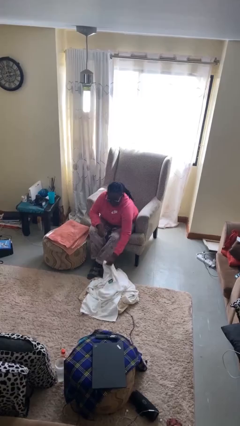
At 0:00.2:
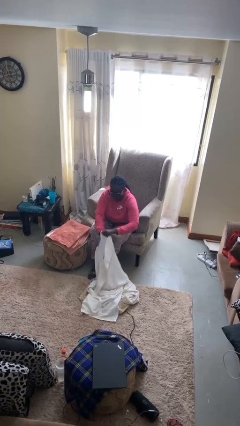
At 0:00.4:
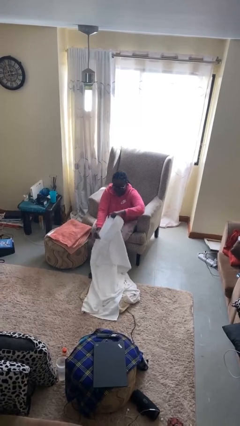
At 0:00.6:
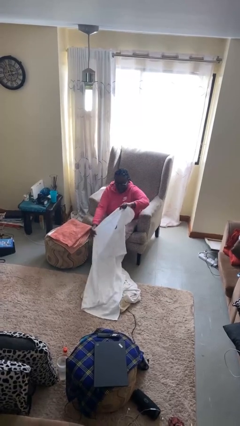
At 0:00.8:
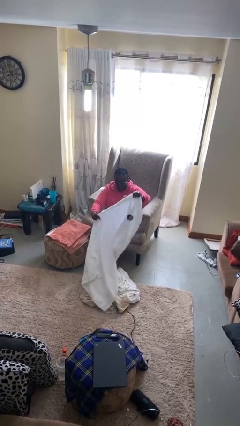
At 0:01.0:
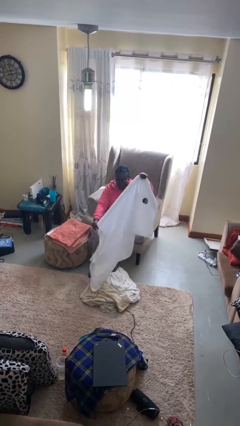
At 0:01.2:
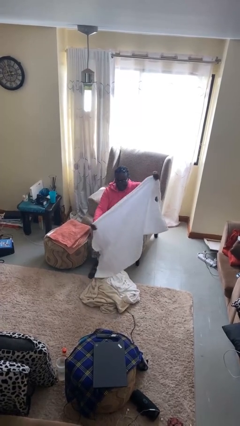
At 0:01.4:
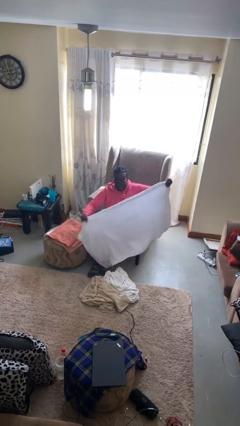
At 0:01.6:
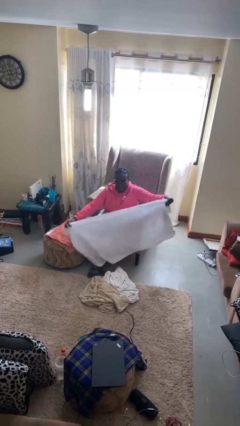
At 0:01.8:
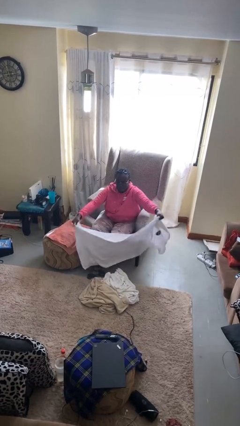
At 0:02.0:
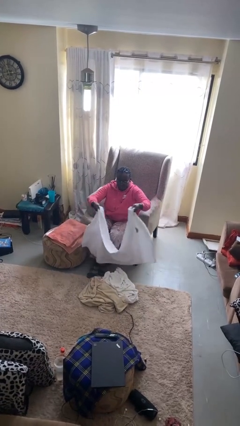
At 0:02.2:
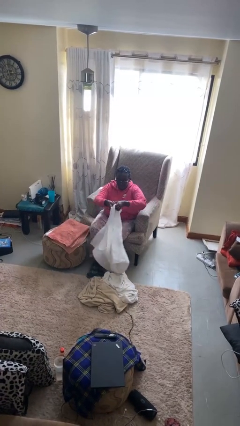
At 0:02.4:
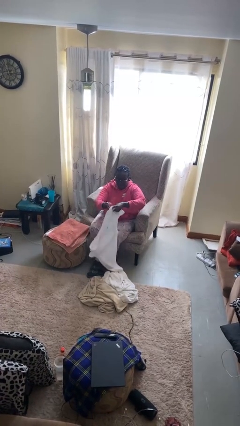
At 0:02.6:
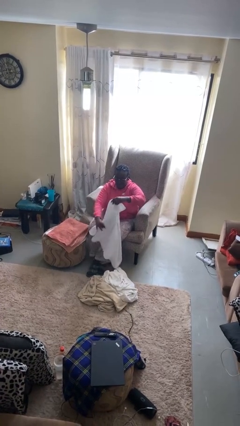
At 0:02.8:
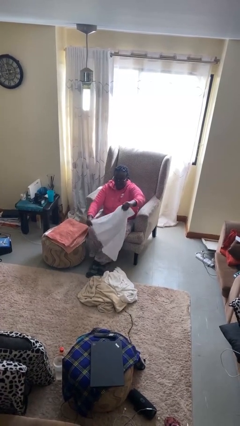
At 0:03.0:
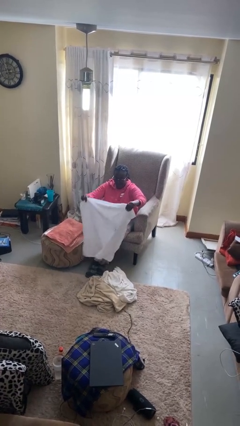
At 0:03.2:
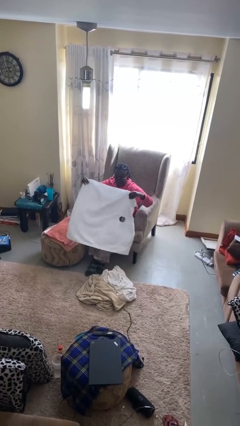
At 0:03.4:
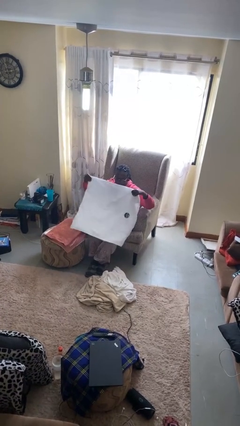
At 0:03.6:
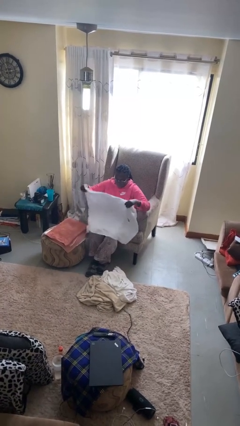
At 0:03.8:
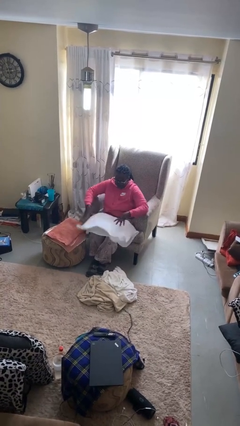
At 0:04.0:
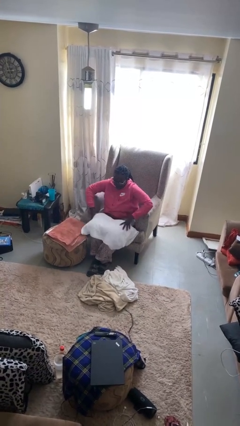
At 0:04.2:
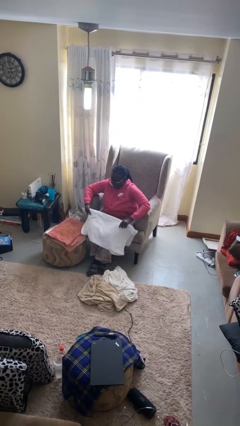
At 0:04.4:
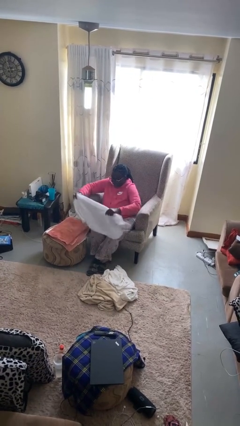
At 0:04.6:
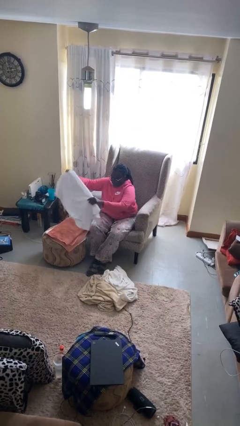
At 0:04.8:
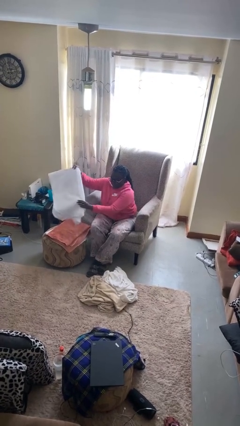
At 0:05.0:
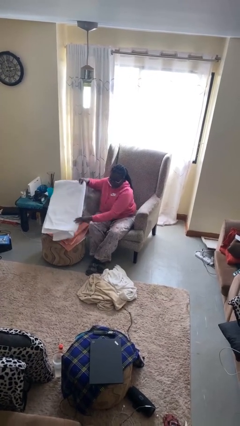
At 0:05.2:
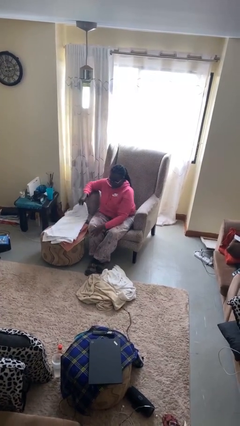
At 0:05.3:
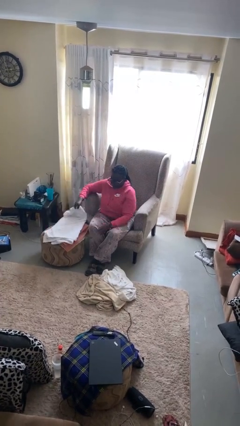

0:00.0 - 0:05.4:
person folds towel

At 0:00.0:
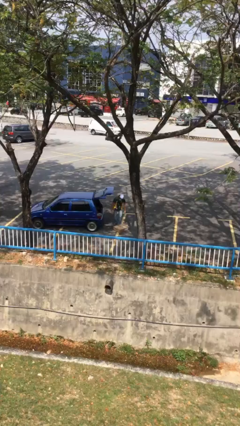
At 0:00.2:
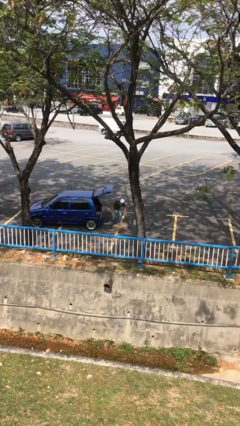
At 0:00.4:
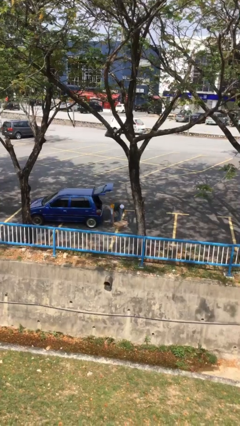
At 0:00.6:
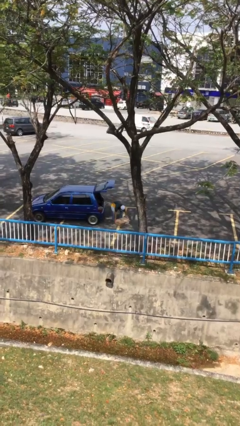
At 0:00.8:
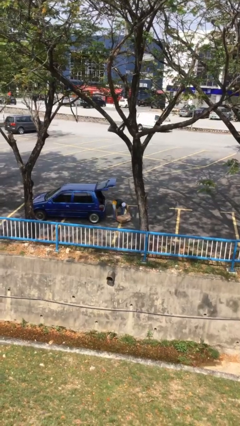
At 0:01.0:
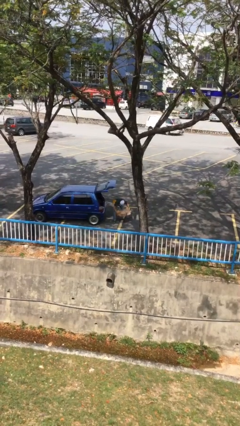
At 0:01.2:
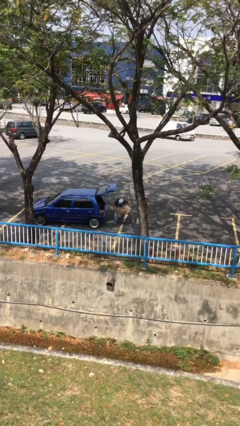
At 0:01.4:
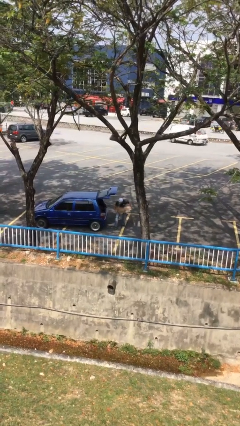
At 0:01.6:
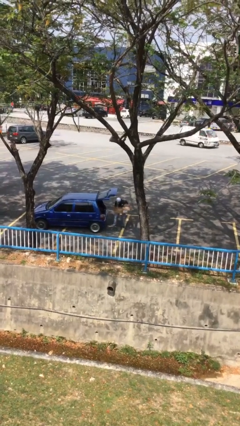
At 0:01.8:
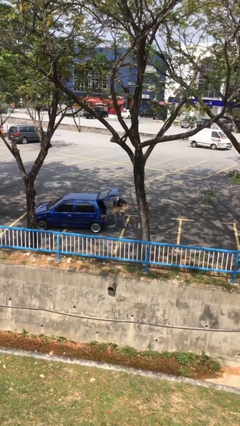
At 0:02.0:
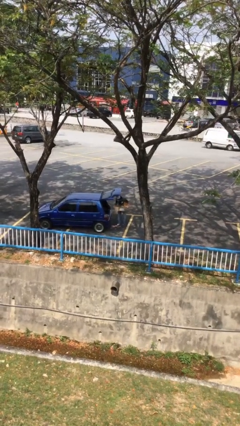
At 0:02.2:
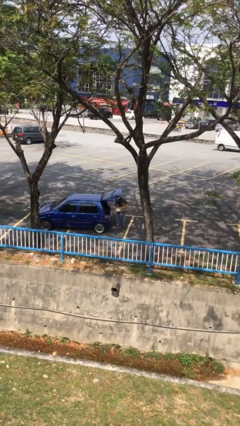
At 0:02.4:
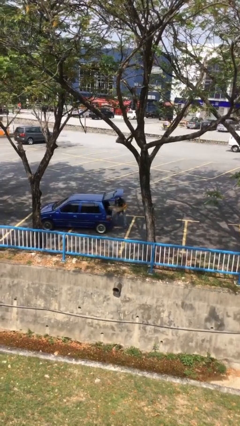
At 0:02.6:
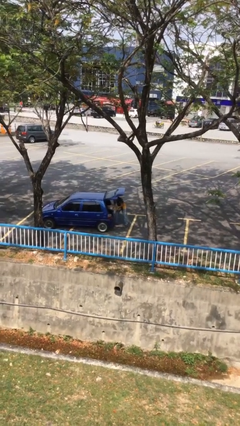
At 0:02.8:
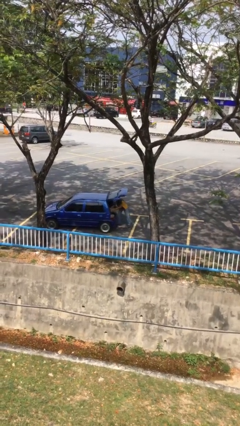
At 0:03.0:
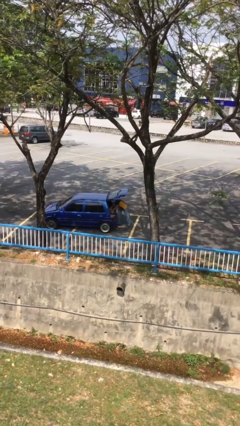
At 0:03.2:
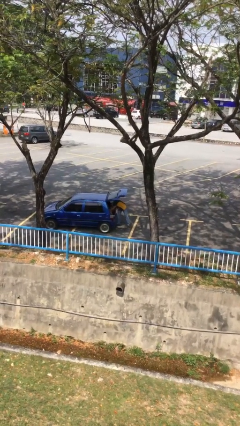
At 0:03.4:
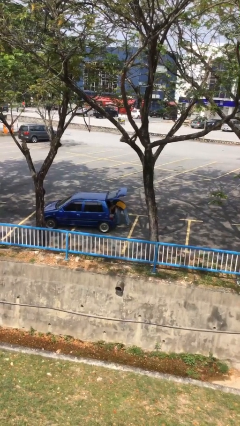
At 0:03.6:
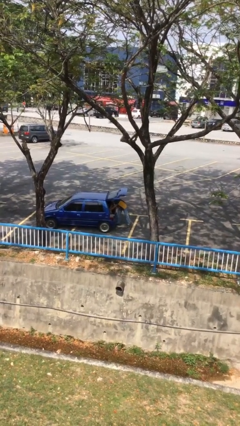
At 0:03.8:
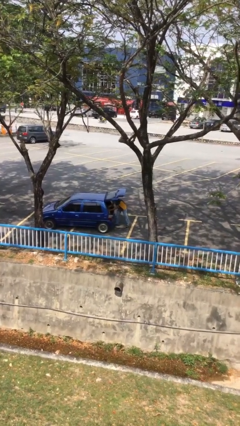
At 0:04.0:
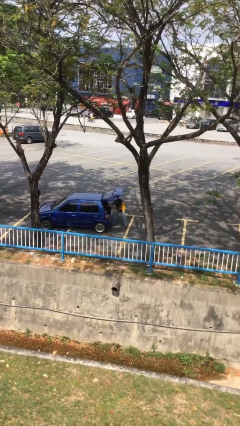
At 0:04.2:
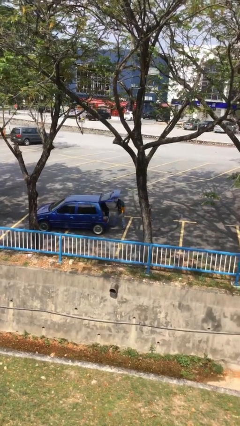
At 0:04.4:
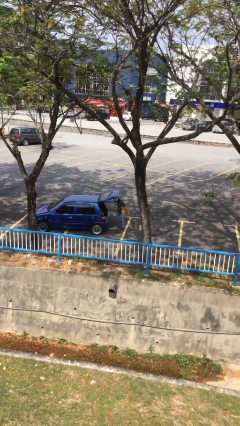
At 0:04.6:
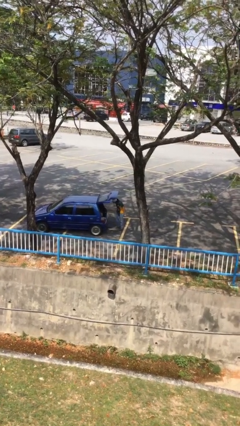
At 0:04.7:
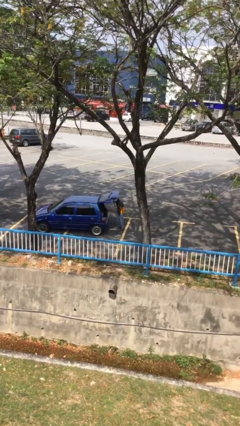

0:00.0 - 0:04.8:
person loads car

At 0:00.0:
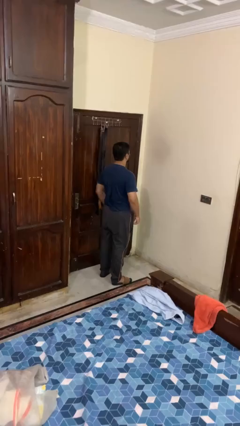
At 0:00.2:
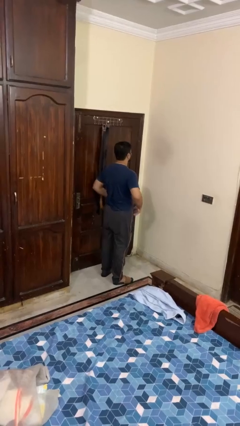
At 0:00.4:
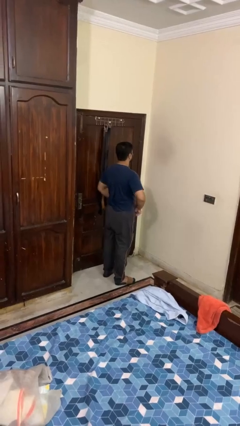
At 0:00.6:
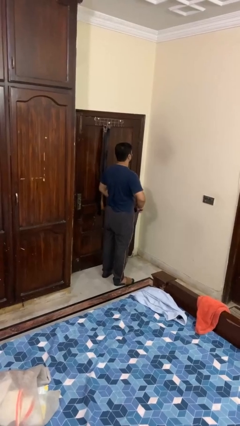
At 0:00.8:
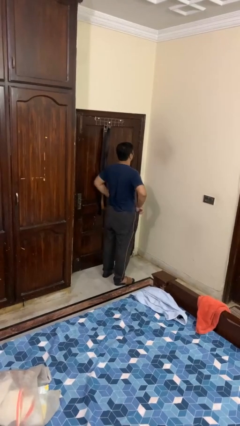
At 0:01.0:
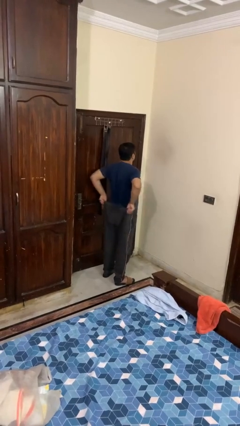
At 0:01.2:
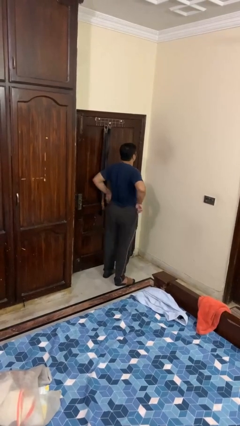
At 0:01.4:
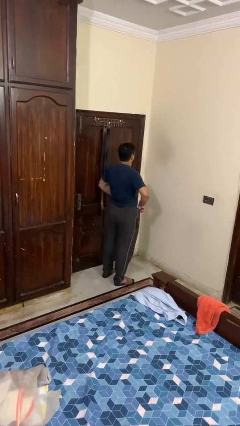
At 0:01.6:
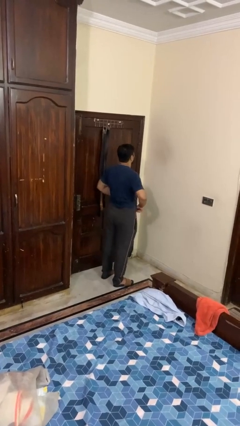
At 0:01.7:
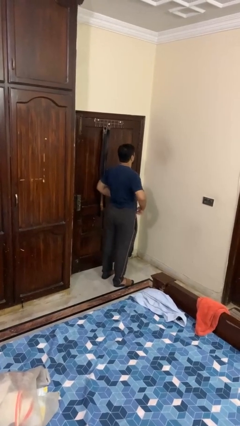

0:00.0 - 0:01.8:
person hikes up pants

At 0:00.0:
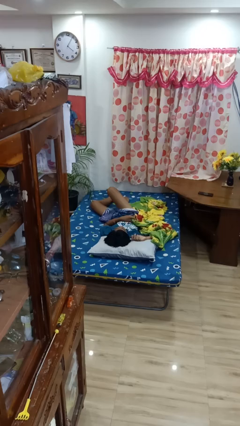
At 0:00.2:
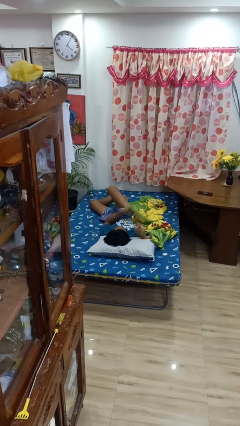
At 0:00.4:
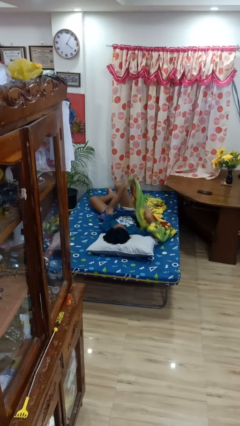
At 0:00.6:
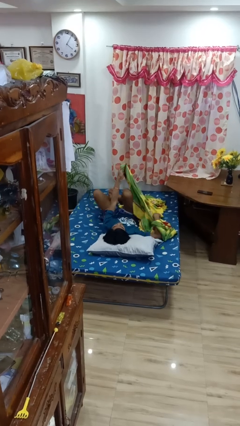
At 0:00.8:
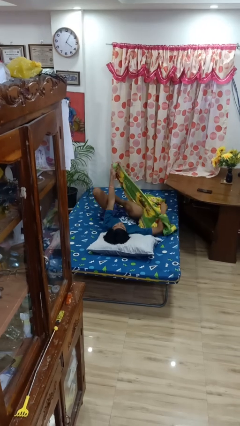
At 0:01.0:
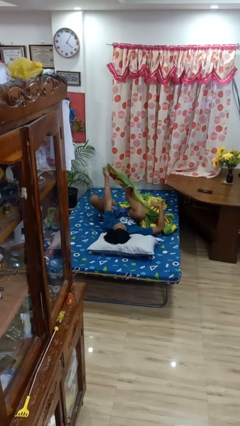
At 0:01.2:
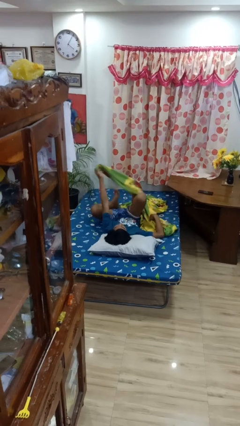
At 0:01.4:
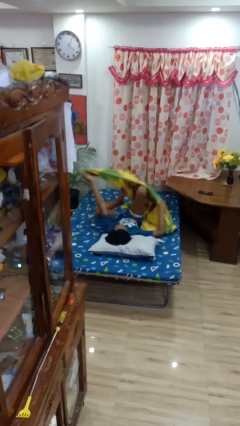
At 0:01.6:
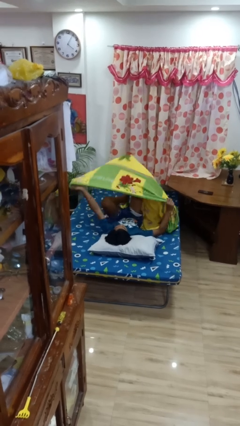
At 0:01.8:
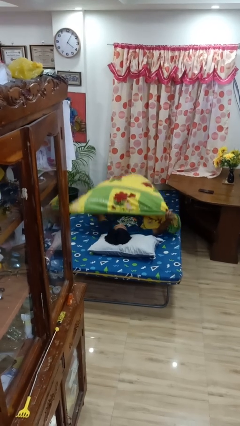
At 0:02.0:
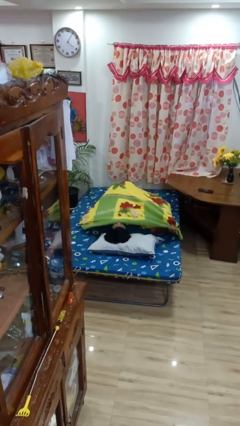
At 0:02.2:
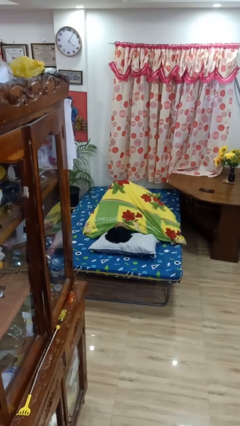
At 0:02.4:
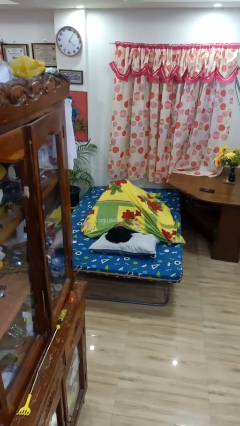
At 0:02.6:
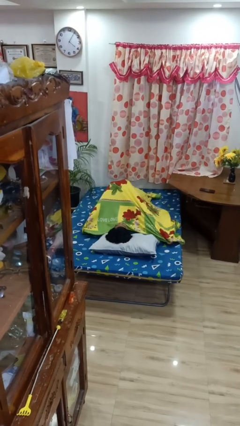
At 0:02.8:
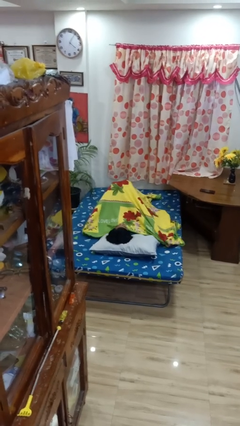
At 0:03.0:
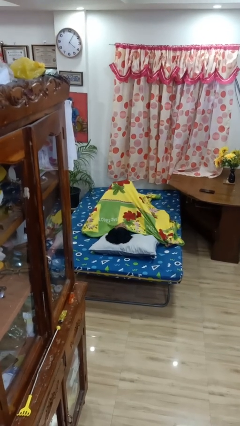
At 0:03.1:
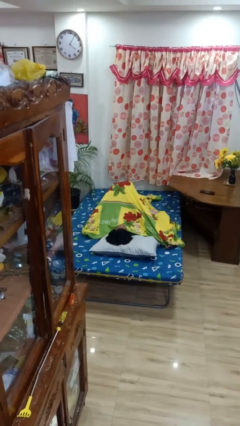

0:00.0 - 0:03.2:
person covers with bedsheets

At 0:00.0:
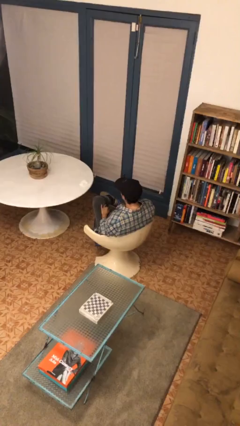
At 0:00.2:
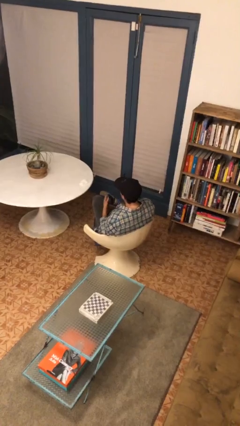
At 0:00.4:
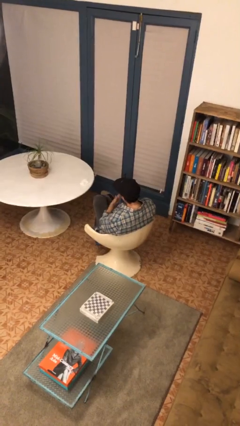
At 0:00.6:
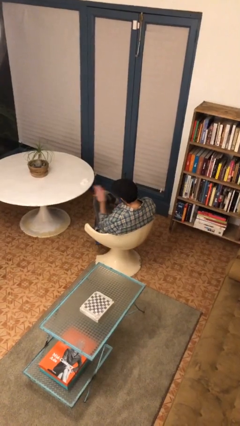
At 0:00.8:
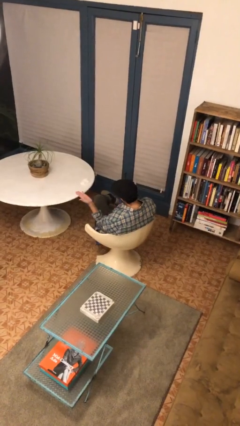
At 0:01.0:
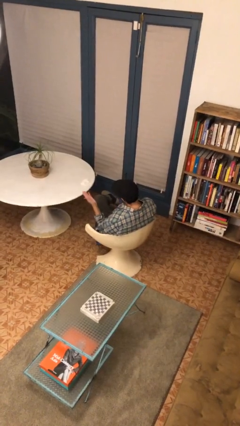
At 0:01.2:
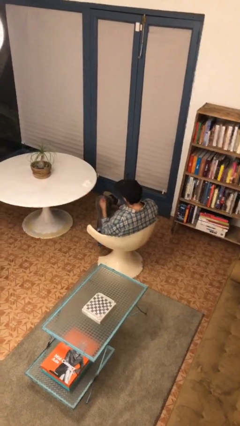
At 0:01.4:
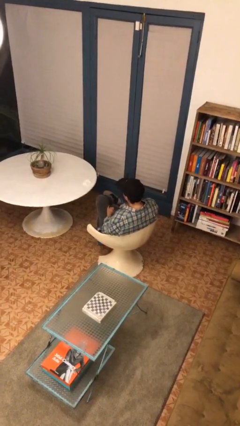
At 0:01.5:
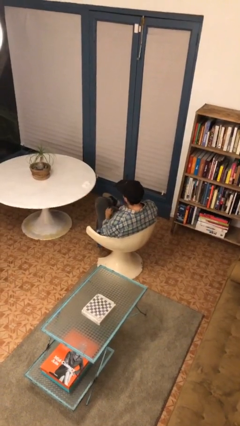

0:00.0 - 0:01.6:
person gestures blow kiss

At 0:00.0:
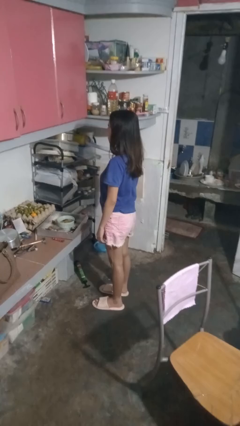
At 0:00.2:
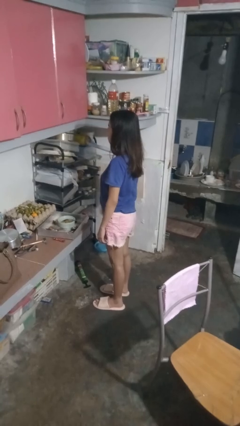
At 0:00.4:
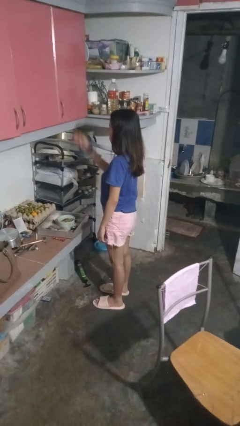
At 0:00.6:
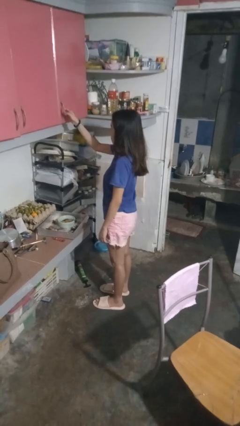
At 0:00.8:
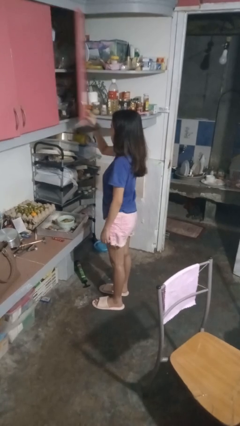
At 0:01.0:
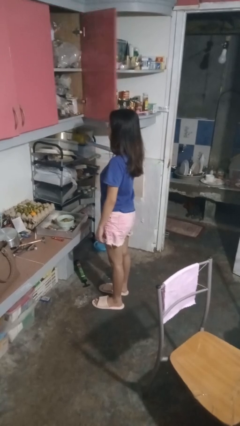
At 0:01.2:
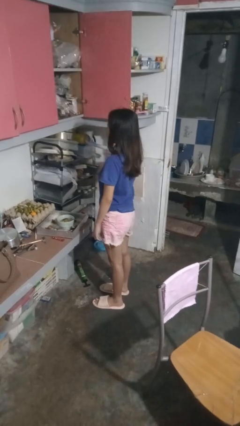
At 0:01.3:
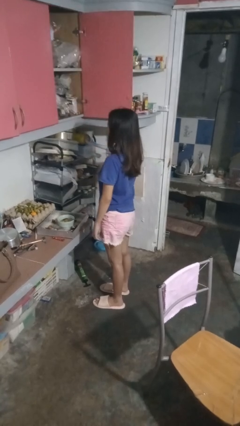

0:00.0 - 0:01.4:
person opens cabinet
